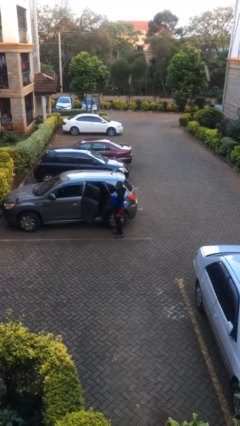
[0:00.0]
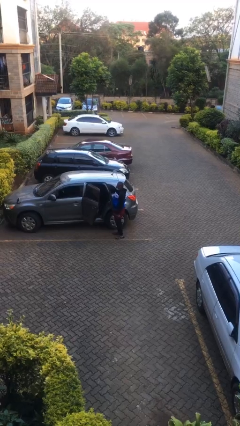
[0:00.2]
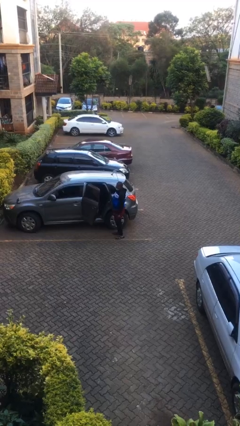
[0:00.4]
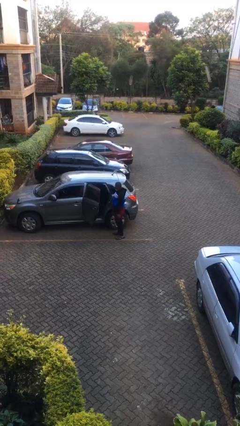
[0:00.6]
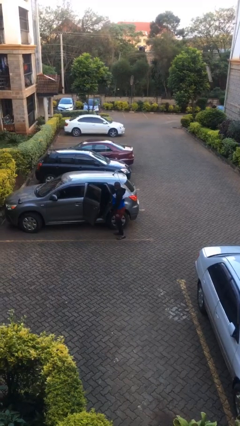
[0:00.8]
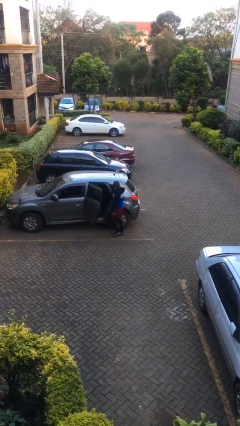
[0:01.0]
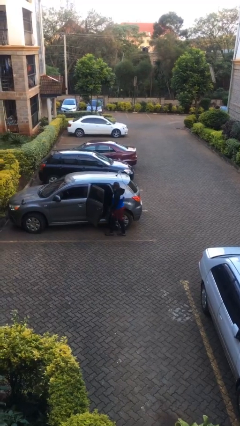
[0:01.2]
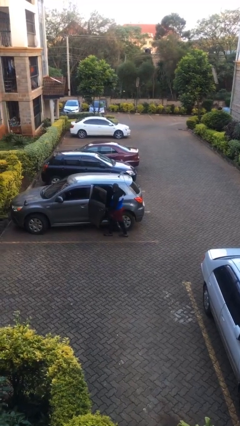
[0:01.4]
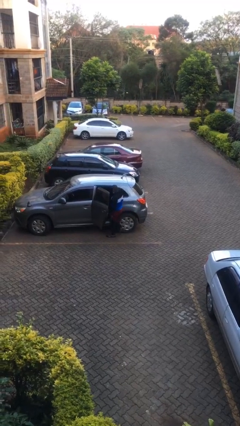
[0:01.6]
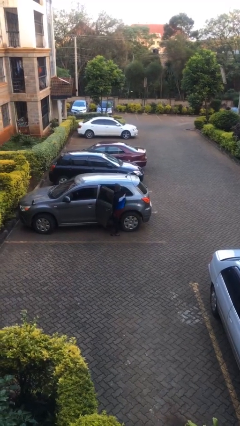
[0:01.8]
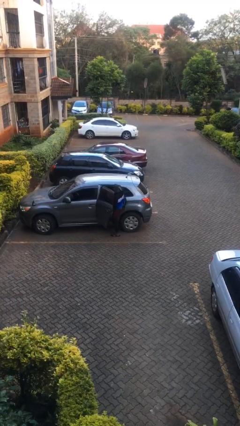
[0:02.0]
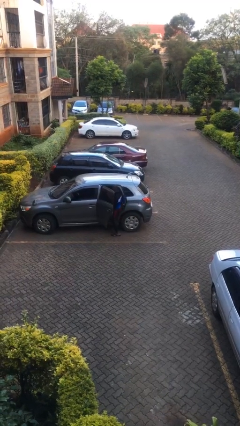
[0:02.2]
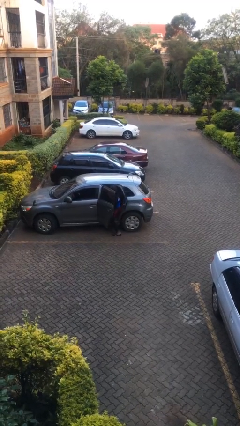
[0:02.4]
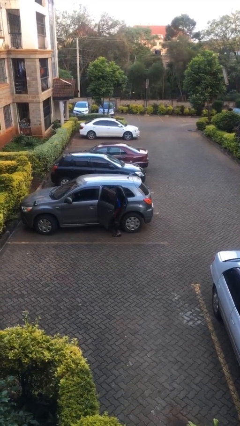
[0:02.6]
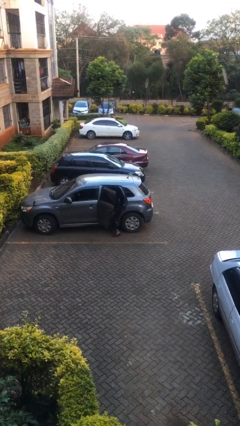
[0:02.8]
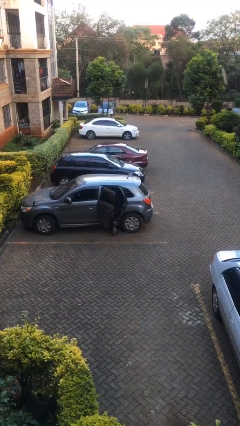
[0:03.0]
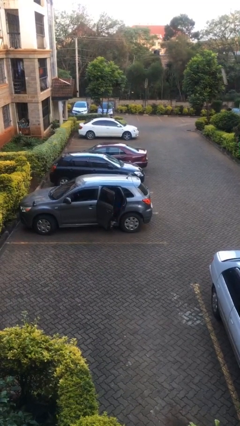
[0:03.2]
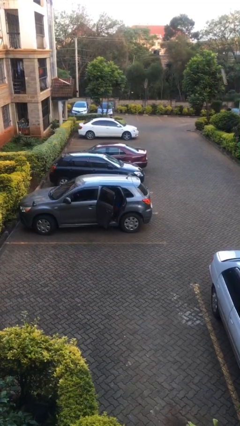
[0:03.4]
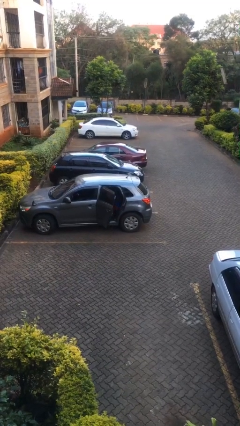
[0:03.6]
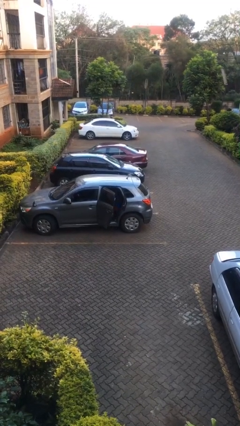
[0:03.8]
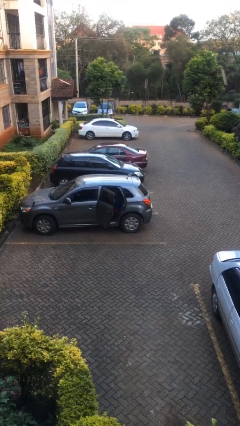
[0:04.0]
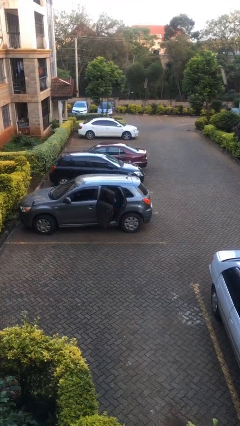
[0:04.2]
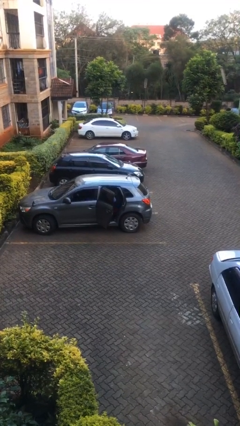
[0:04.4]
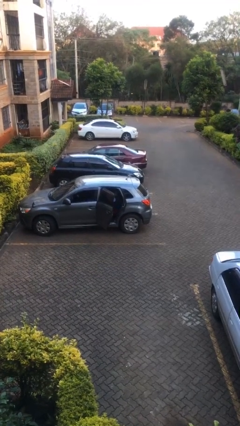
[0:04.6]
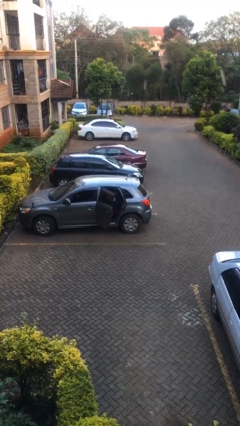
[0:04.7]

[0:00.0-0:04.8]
person enters car

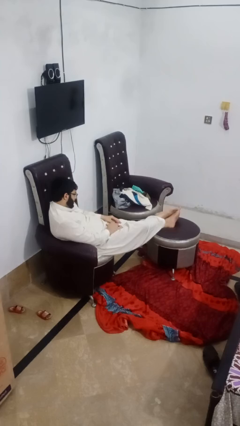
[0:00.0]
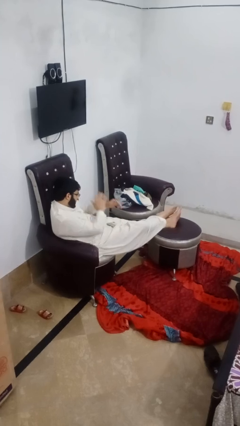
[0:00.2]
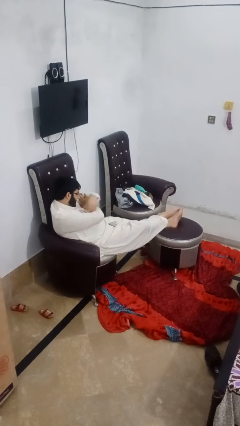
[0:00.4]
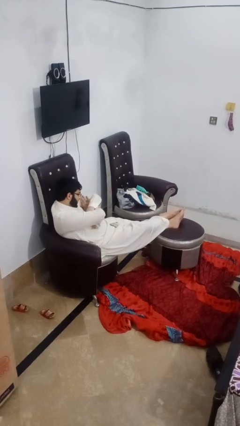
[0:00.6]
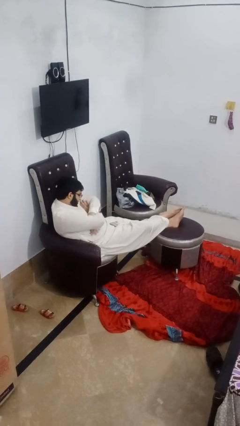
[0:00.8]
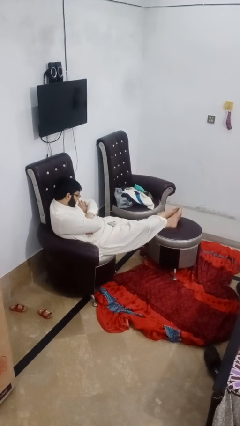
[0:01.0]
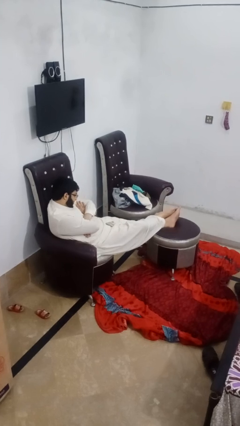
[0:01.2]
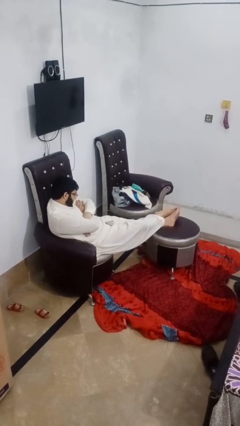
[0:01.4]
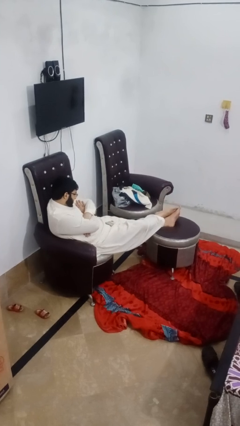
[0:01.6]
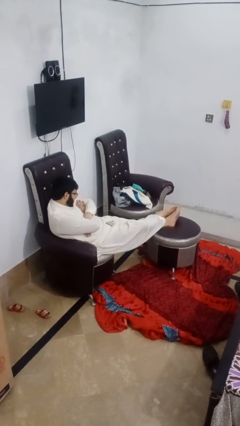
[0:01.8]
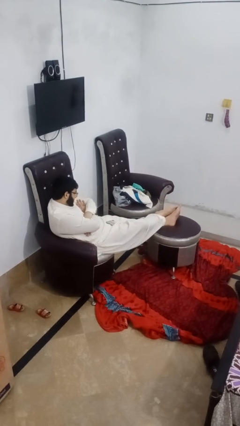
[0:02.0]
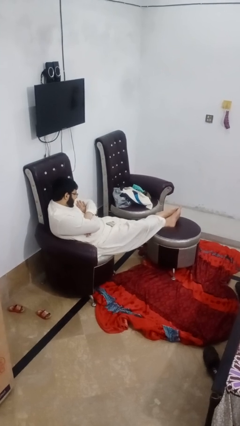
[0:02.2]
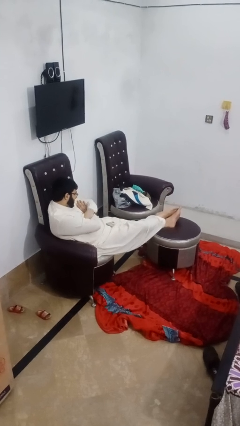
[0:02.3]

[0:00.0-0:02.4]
person crosses arms

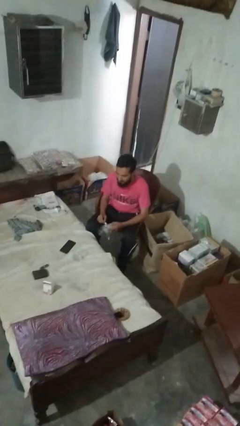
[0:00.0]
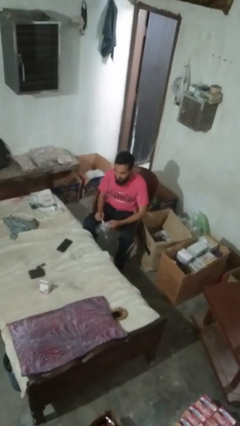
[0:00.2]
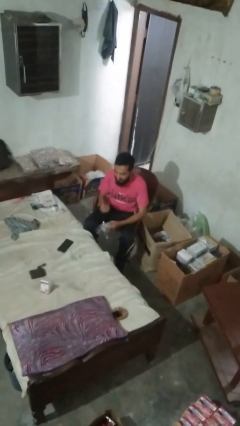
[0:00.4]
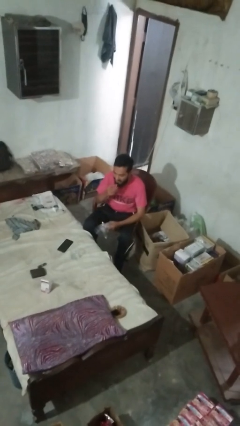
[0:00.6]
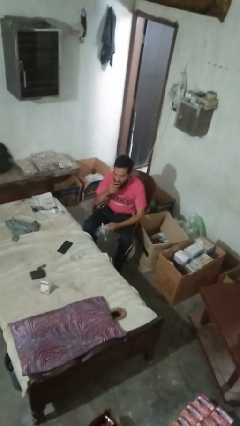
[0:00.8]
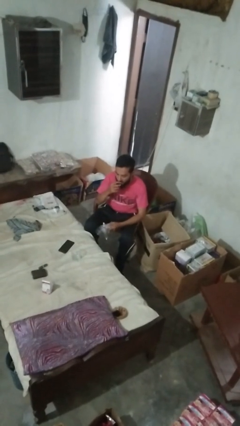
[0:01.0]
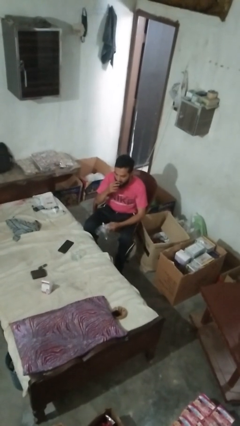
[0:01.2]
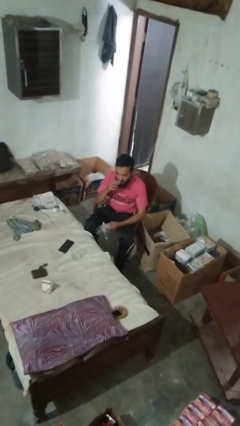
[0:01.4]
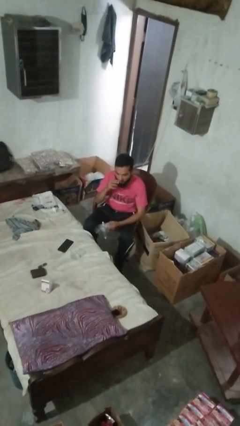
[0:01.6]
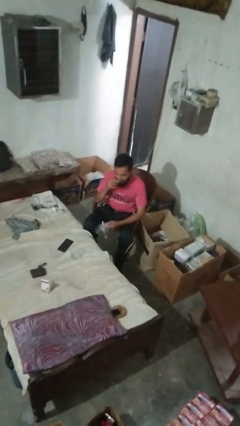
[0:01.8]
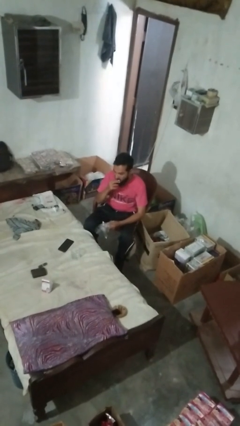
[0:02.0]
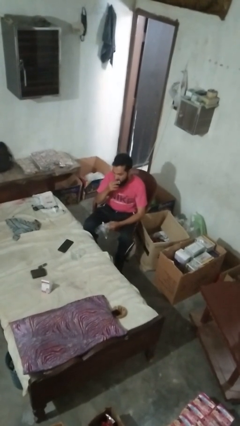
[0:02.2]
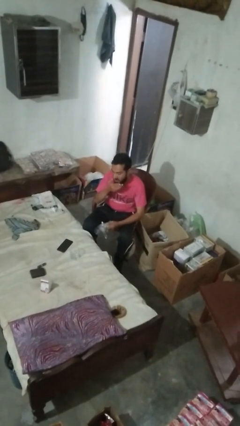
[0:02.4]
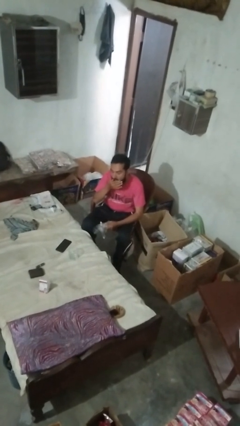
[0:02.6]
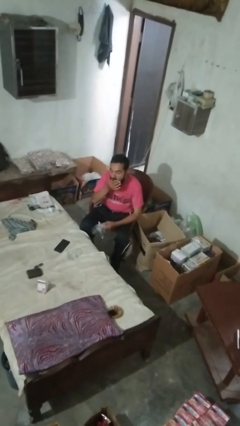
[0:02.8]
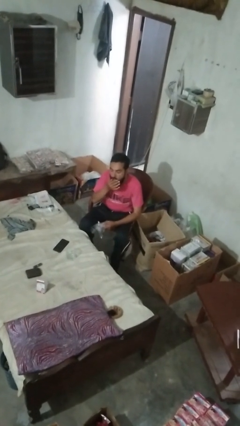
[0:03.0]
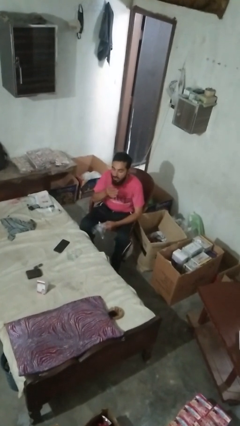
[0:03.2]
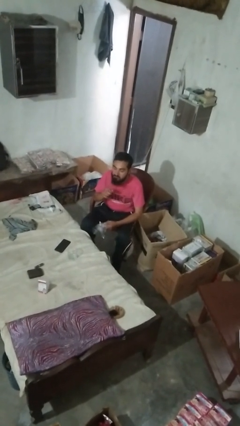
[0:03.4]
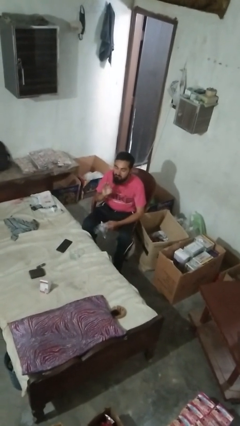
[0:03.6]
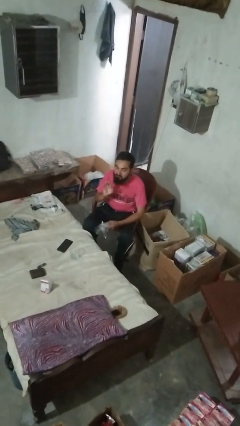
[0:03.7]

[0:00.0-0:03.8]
person licks fingers

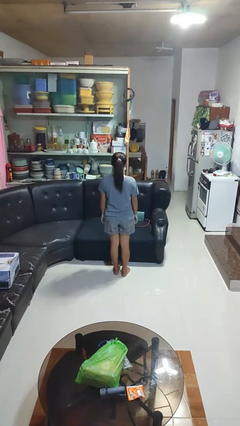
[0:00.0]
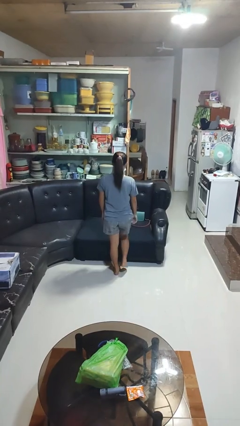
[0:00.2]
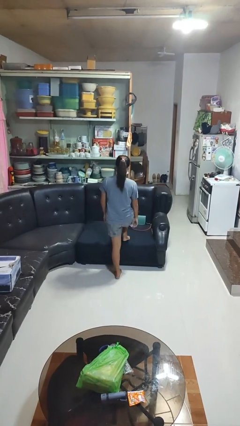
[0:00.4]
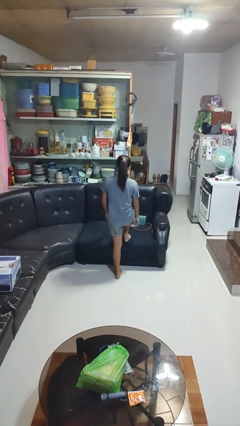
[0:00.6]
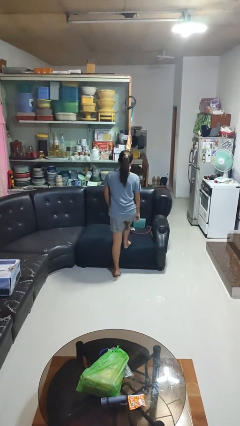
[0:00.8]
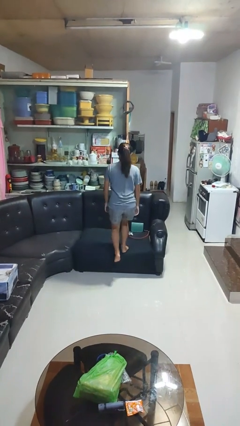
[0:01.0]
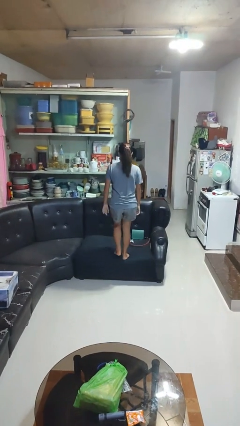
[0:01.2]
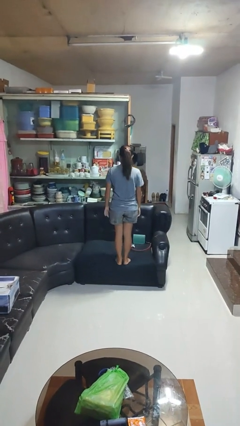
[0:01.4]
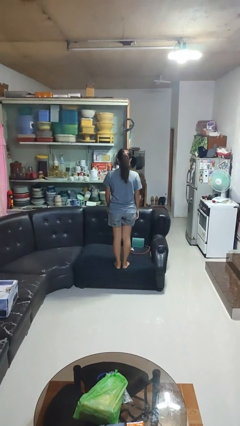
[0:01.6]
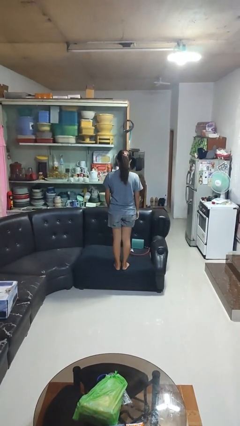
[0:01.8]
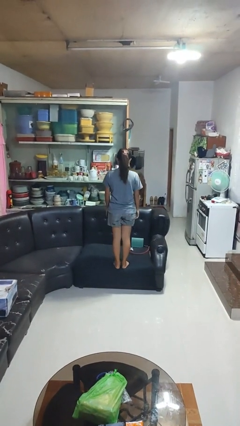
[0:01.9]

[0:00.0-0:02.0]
person climbs on couch

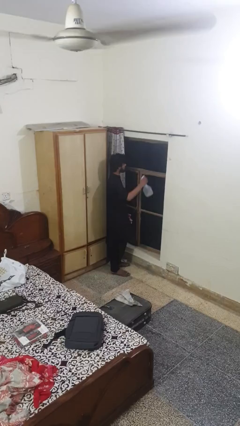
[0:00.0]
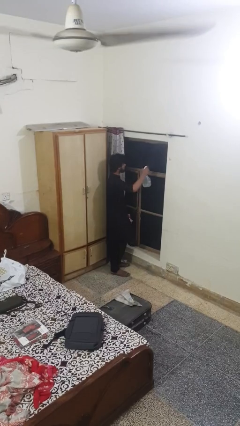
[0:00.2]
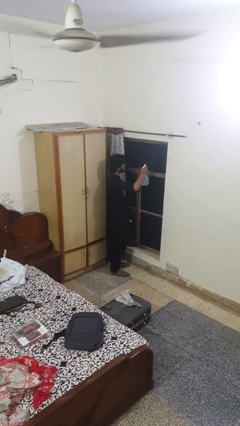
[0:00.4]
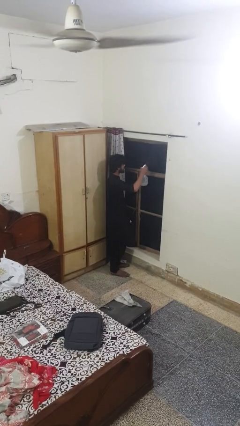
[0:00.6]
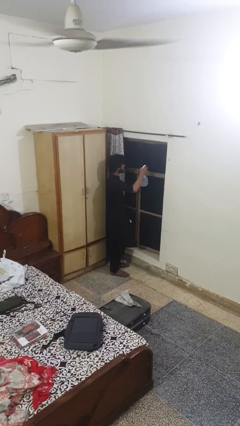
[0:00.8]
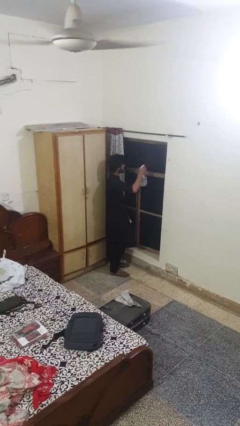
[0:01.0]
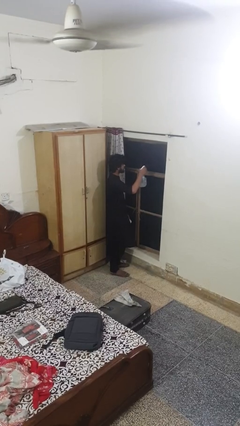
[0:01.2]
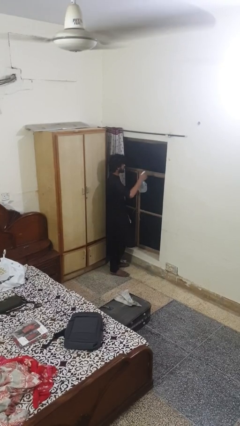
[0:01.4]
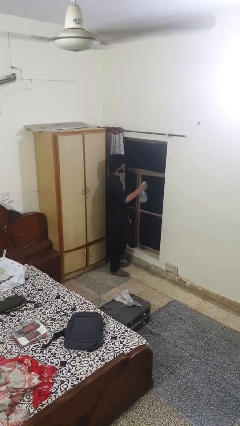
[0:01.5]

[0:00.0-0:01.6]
person sprays from bottle

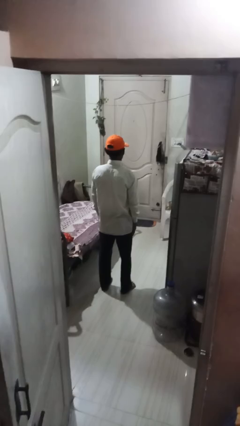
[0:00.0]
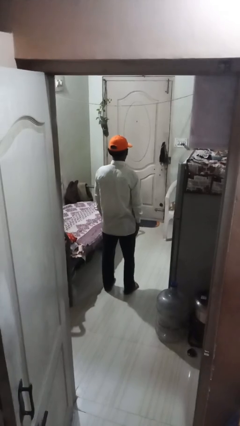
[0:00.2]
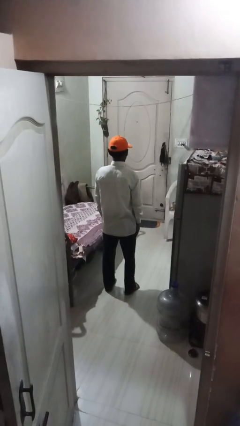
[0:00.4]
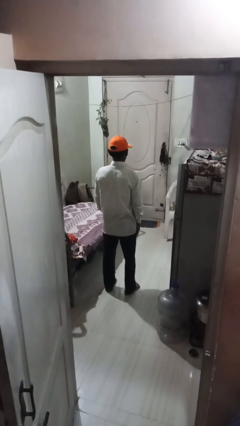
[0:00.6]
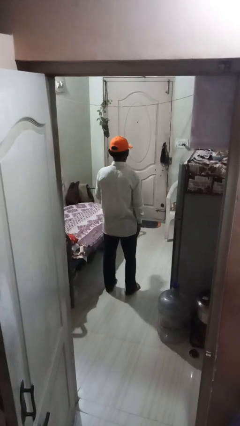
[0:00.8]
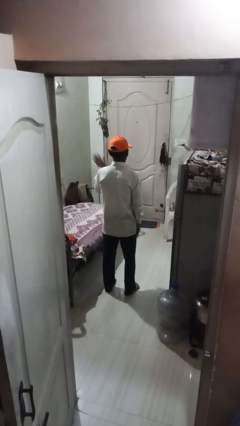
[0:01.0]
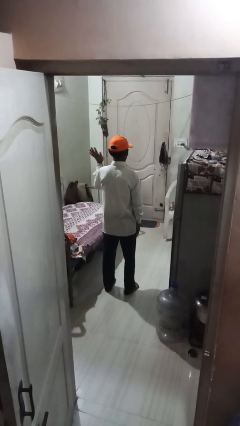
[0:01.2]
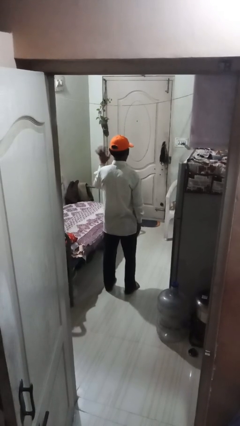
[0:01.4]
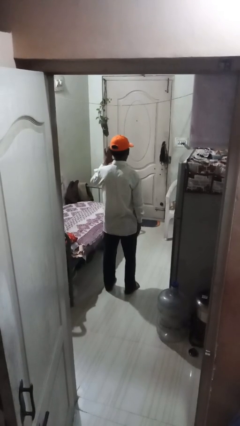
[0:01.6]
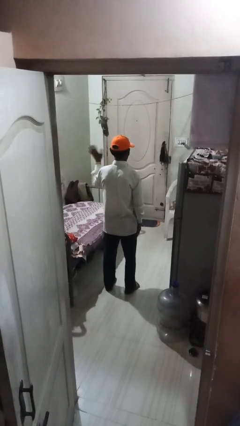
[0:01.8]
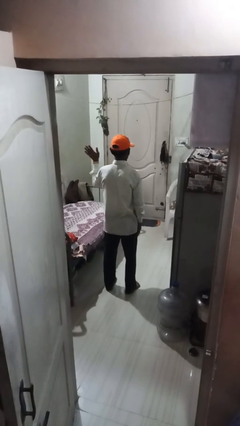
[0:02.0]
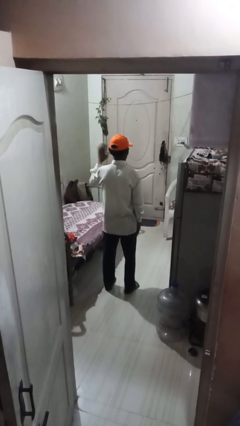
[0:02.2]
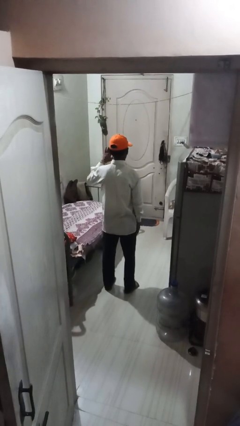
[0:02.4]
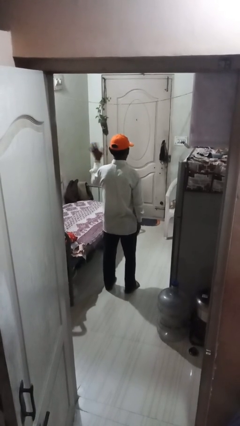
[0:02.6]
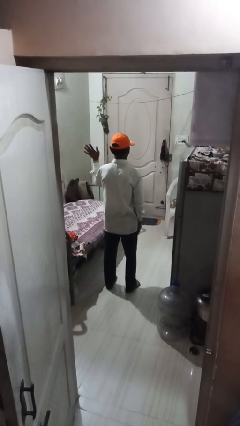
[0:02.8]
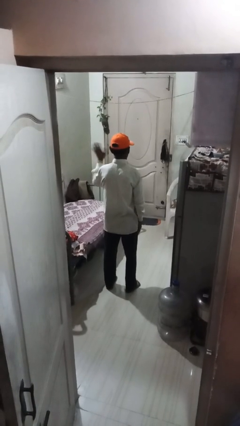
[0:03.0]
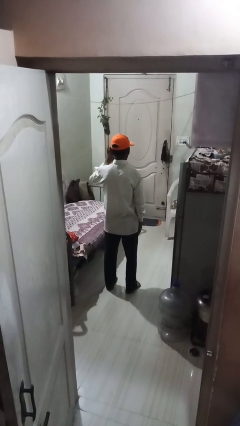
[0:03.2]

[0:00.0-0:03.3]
person waves at person
